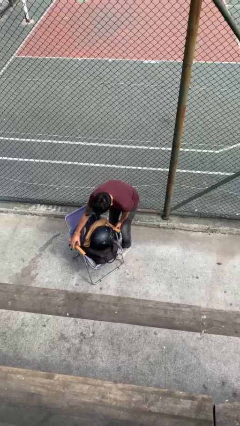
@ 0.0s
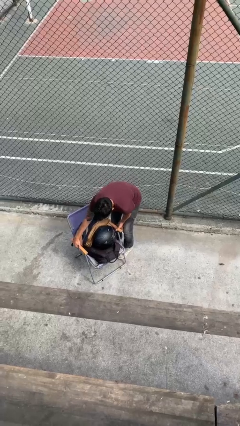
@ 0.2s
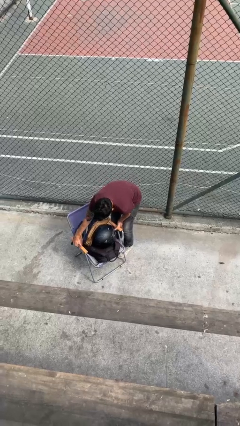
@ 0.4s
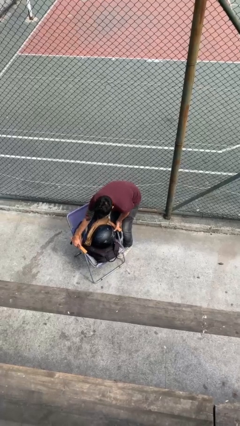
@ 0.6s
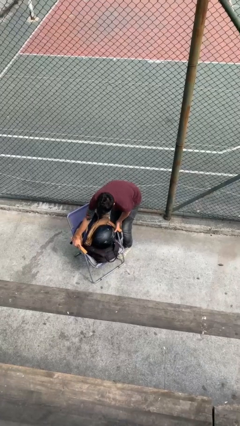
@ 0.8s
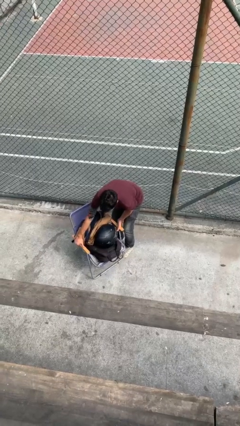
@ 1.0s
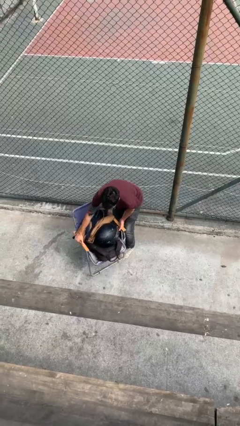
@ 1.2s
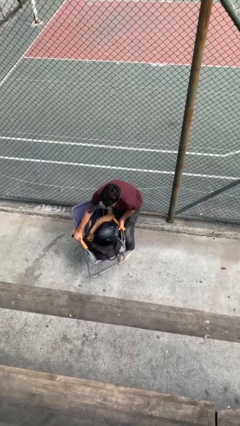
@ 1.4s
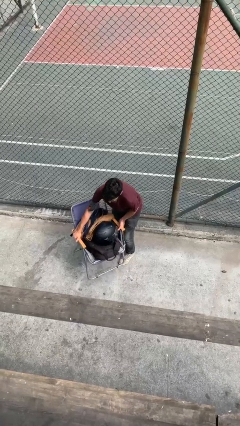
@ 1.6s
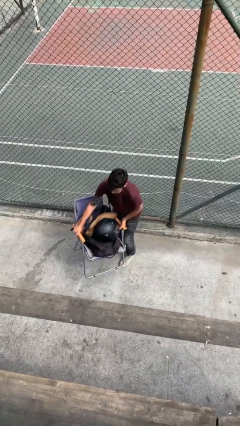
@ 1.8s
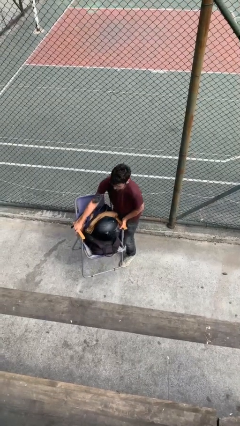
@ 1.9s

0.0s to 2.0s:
person picks up object from floor

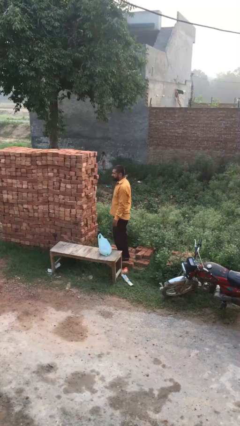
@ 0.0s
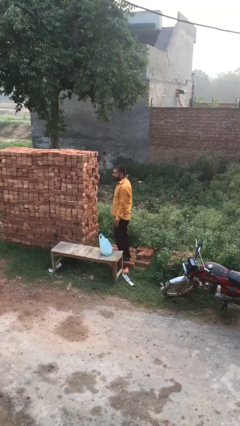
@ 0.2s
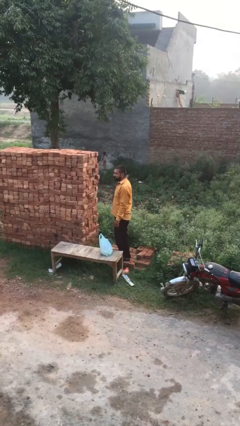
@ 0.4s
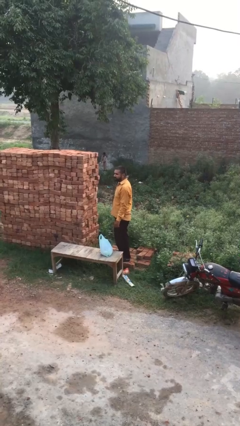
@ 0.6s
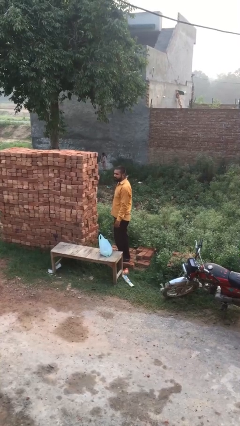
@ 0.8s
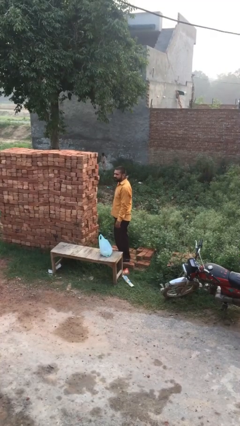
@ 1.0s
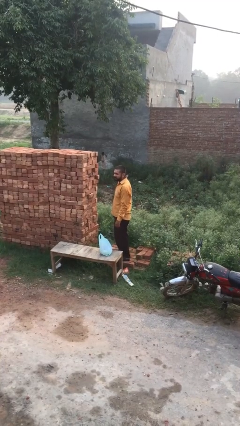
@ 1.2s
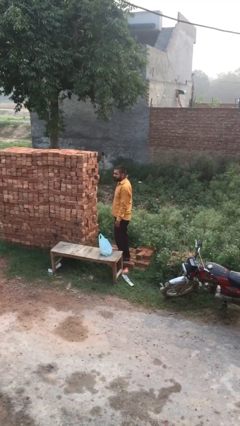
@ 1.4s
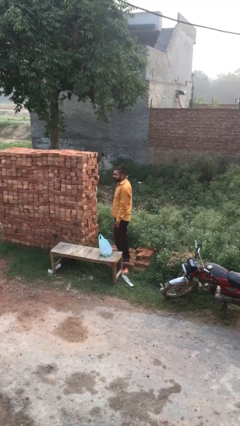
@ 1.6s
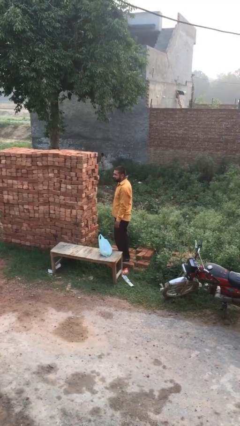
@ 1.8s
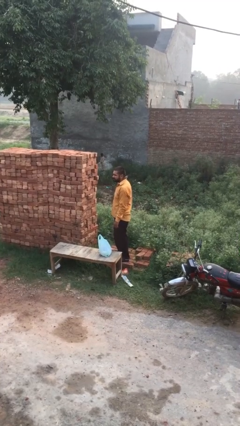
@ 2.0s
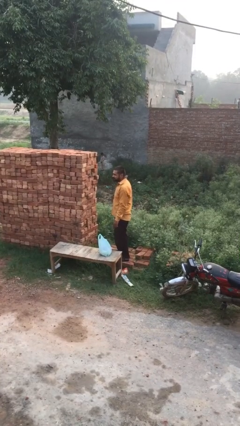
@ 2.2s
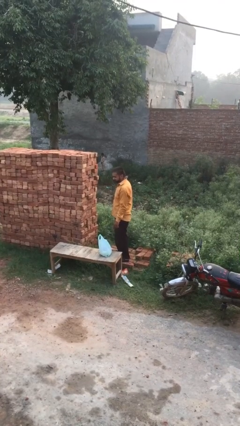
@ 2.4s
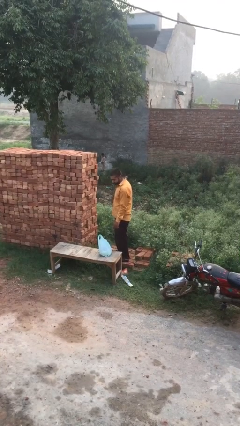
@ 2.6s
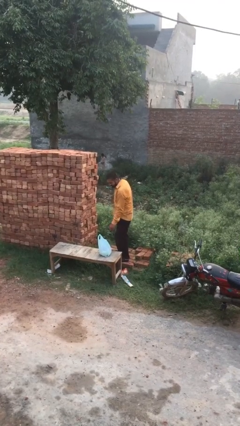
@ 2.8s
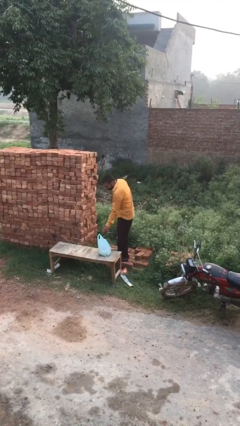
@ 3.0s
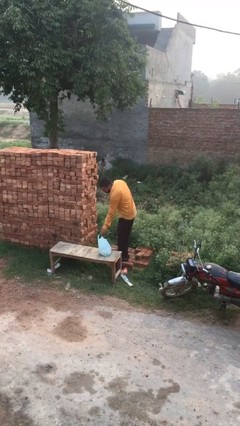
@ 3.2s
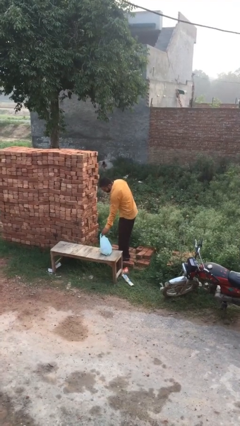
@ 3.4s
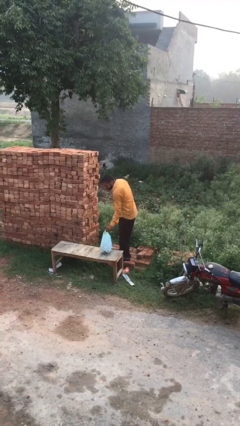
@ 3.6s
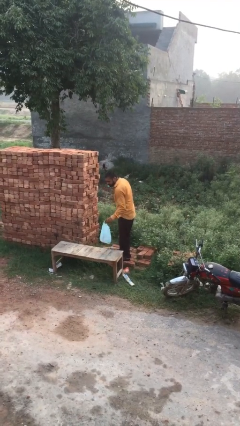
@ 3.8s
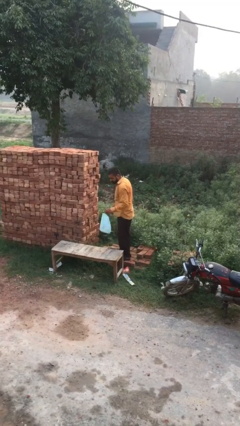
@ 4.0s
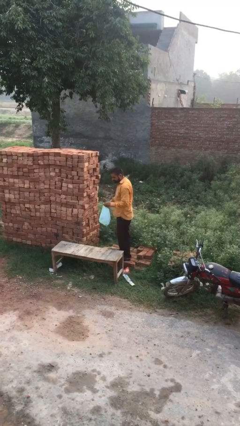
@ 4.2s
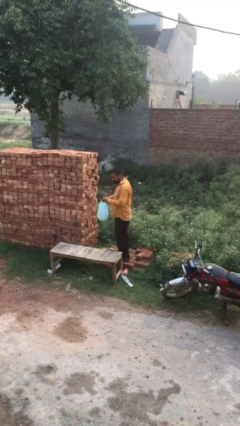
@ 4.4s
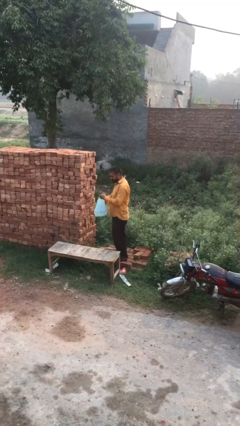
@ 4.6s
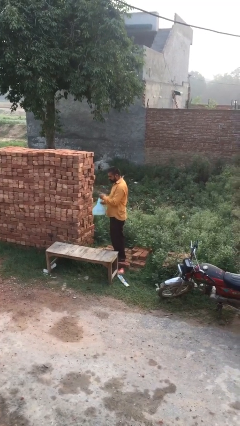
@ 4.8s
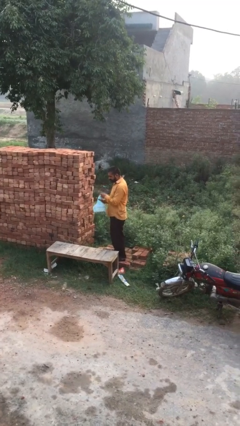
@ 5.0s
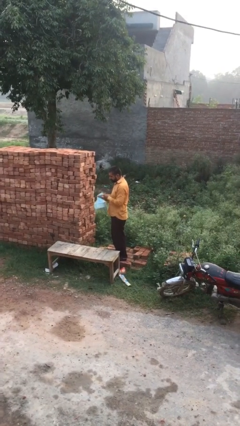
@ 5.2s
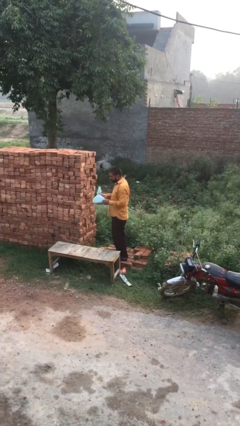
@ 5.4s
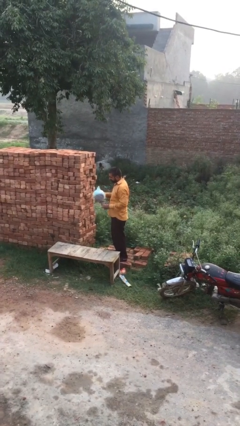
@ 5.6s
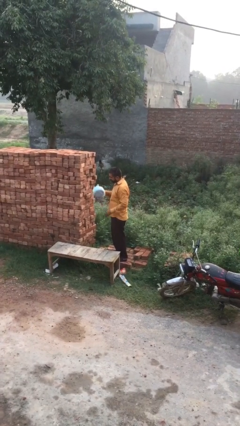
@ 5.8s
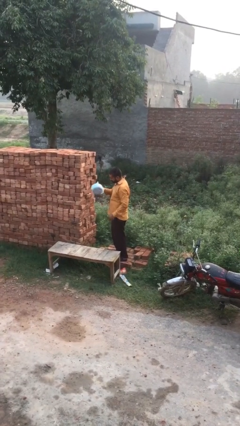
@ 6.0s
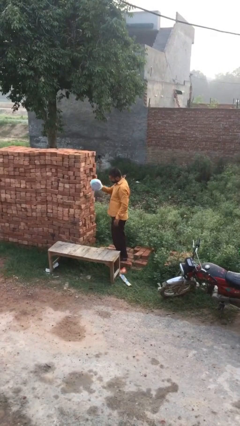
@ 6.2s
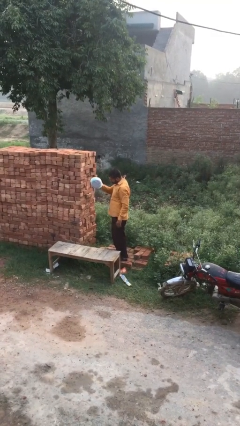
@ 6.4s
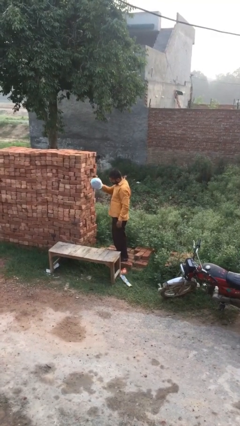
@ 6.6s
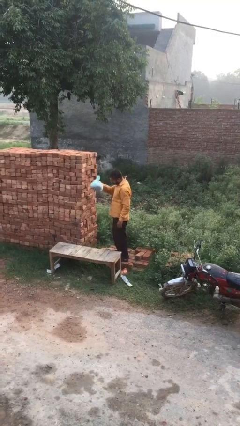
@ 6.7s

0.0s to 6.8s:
person picks up object from table

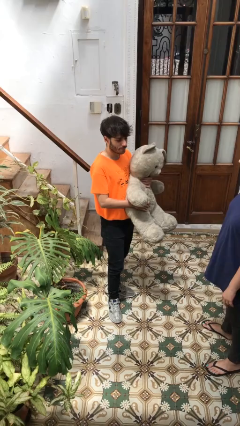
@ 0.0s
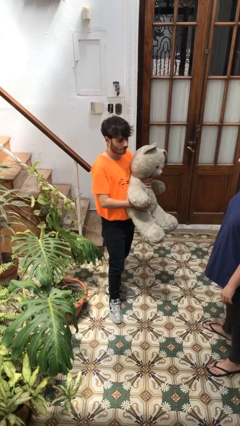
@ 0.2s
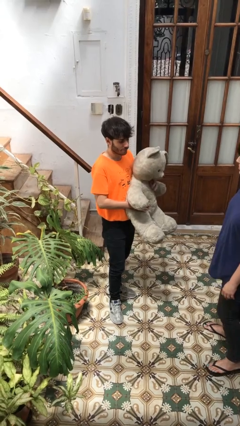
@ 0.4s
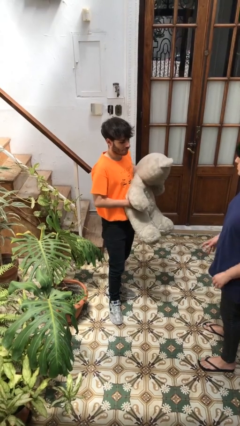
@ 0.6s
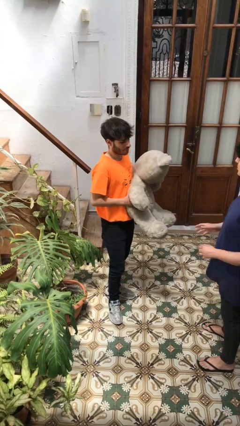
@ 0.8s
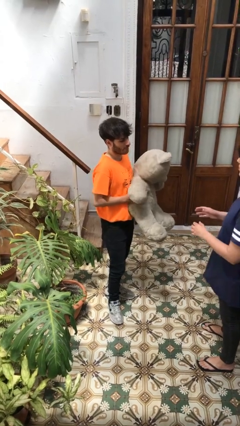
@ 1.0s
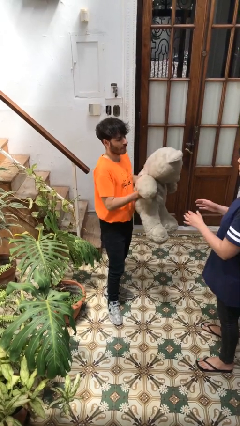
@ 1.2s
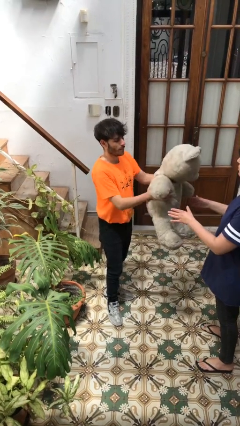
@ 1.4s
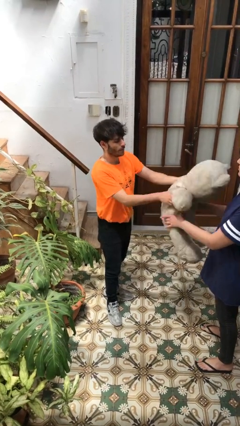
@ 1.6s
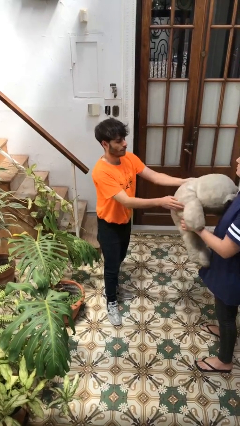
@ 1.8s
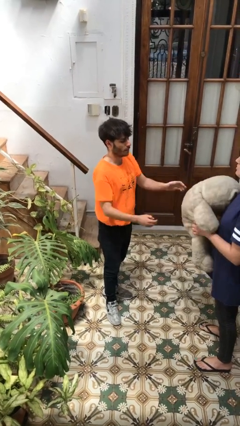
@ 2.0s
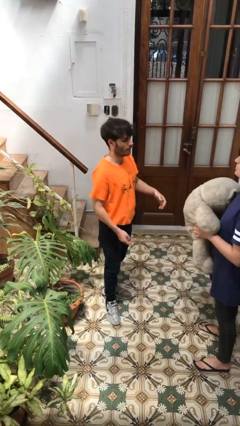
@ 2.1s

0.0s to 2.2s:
person transfers object to person

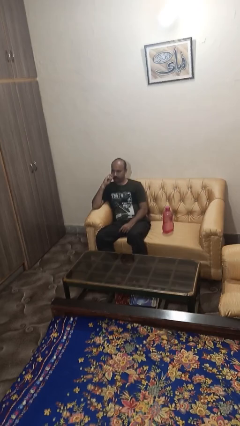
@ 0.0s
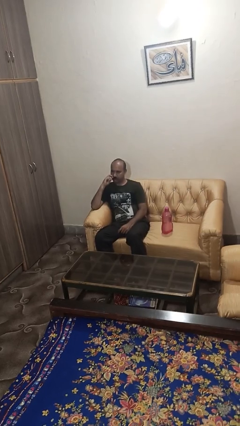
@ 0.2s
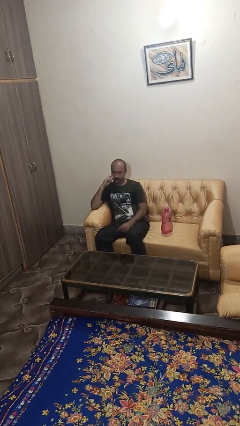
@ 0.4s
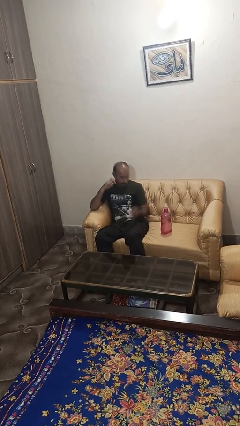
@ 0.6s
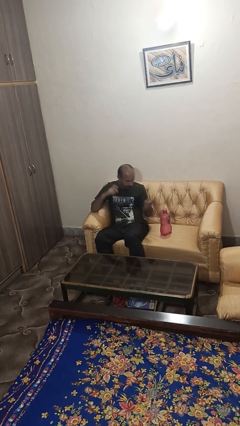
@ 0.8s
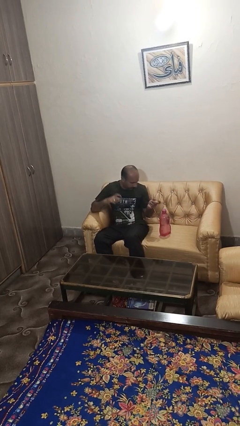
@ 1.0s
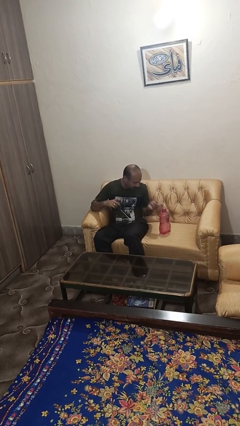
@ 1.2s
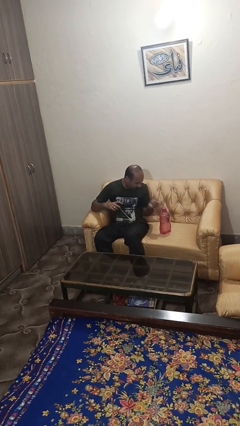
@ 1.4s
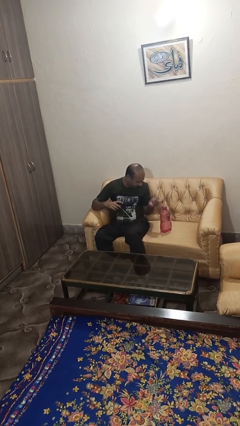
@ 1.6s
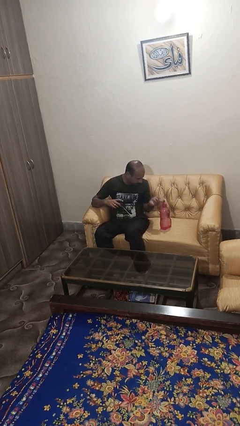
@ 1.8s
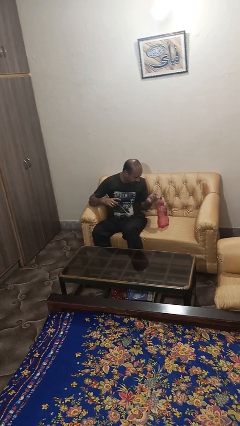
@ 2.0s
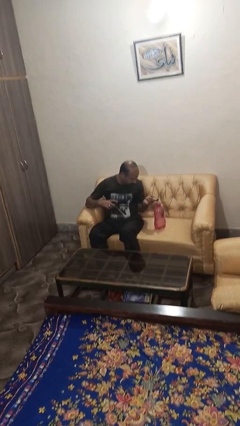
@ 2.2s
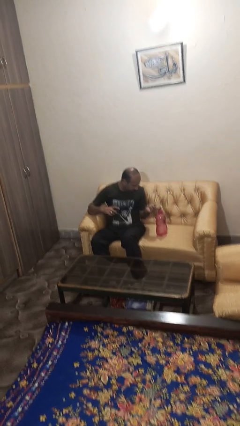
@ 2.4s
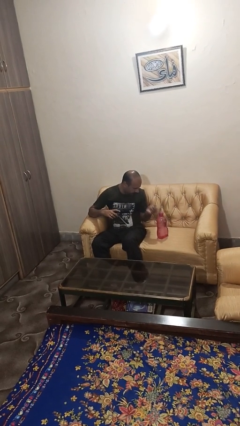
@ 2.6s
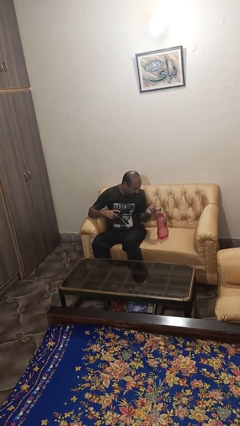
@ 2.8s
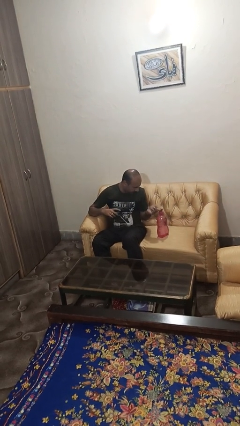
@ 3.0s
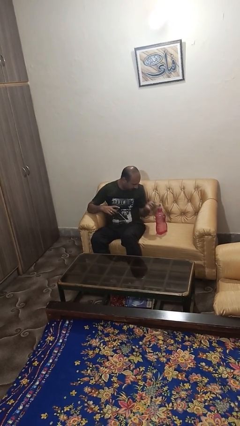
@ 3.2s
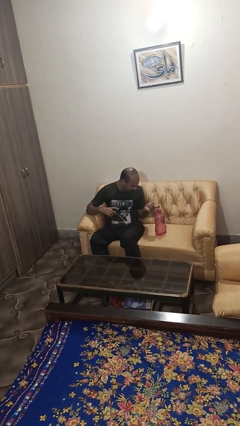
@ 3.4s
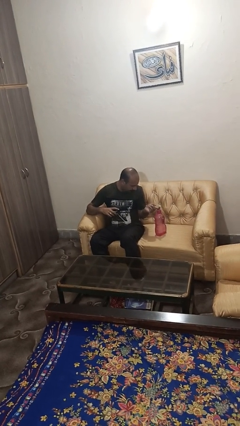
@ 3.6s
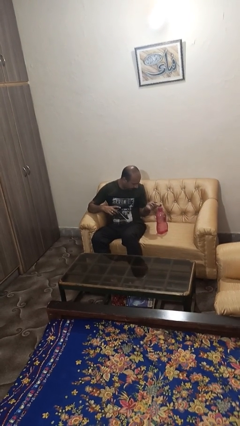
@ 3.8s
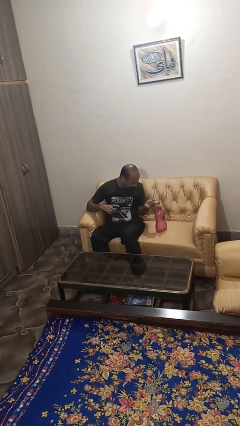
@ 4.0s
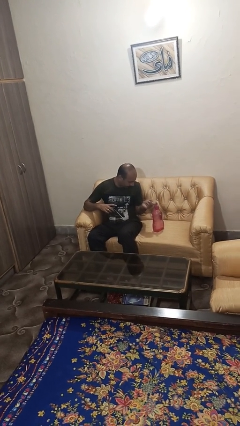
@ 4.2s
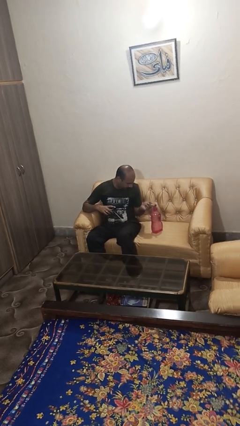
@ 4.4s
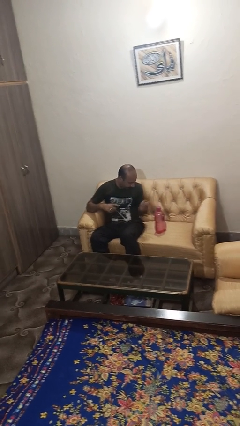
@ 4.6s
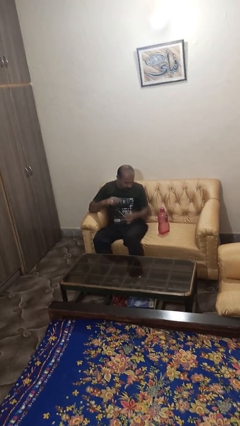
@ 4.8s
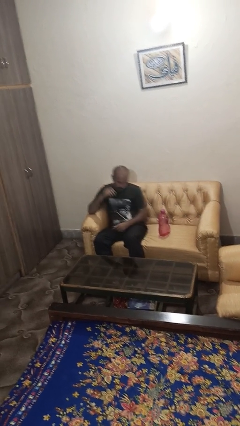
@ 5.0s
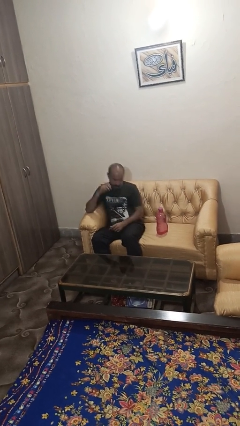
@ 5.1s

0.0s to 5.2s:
person taps object with finger

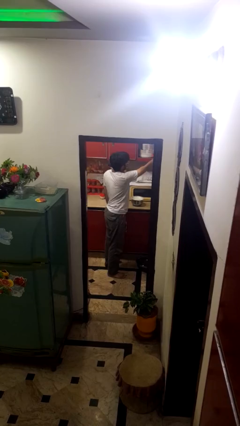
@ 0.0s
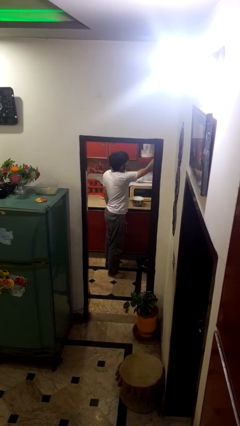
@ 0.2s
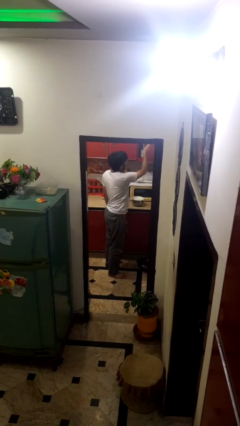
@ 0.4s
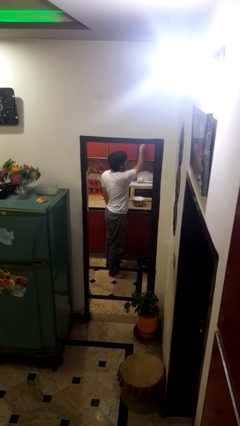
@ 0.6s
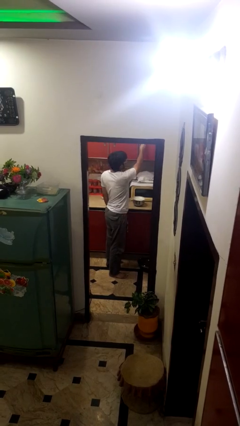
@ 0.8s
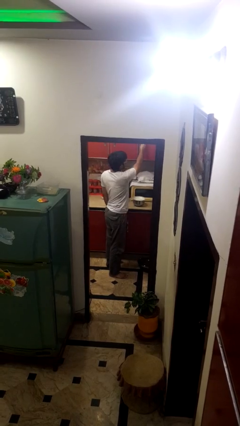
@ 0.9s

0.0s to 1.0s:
person closes cabinet

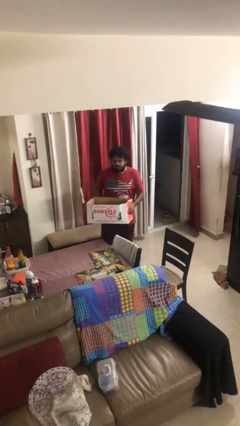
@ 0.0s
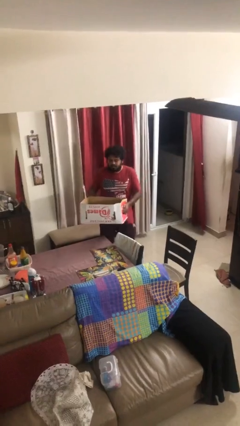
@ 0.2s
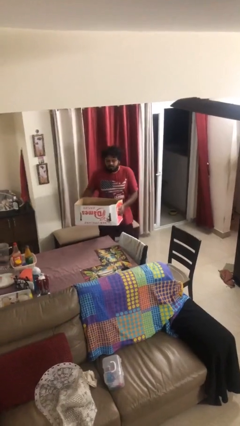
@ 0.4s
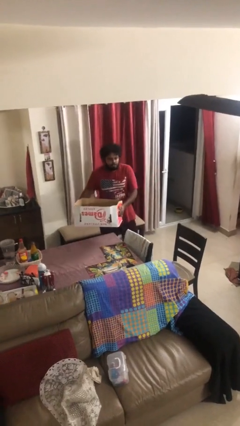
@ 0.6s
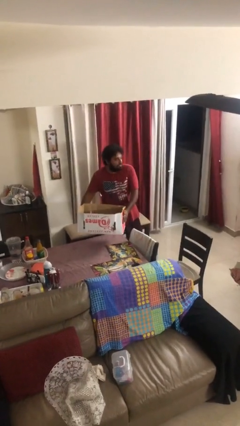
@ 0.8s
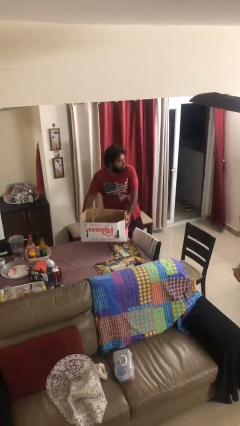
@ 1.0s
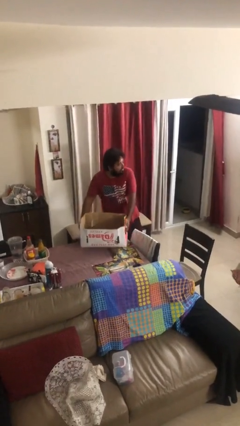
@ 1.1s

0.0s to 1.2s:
person puts down object on table
